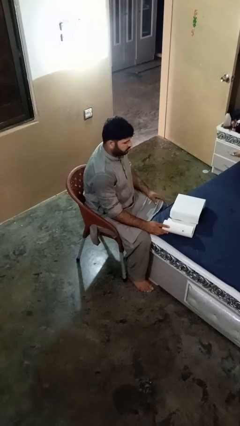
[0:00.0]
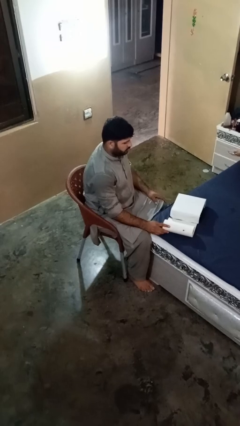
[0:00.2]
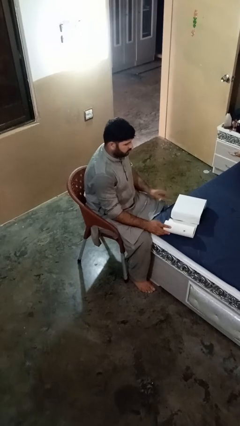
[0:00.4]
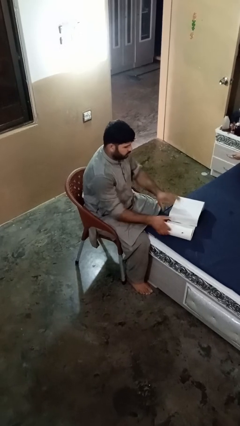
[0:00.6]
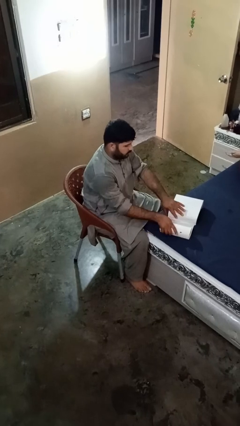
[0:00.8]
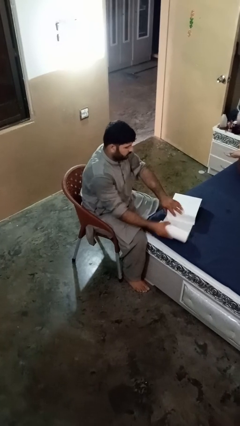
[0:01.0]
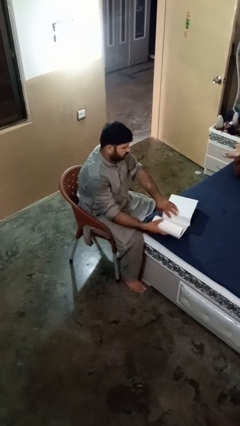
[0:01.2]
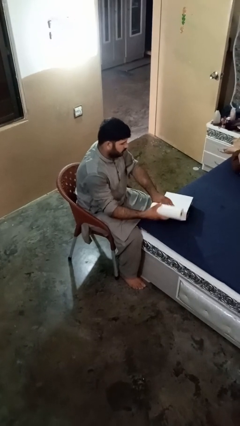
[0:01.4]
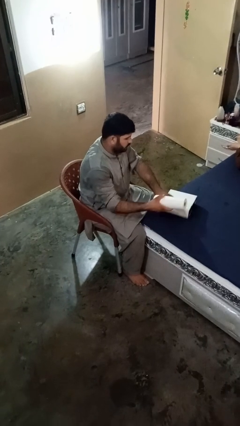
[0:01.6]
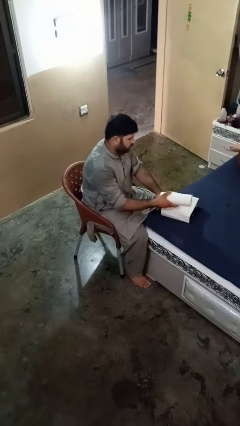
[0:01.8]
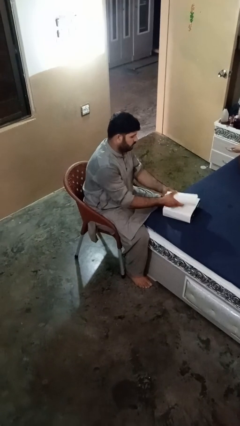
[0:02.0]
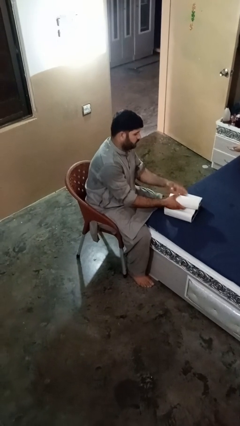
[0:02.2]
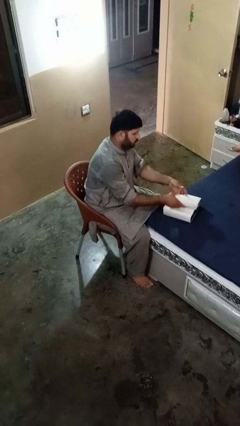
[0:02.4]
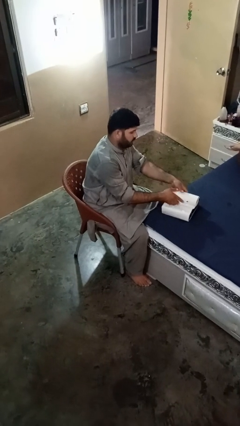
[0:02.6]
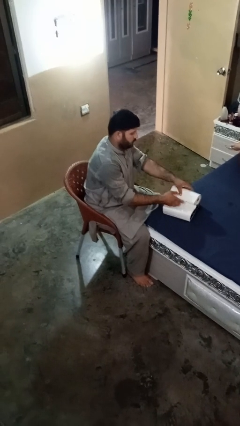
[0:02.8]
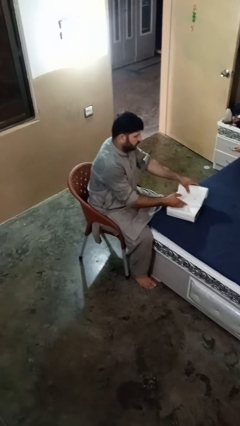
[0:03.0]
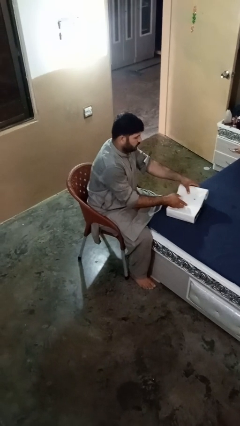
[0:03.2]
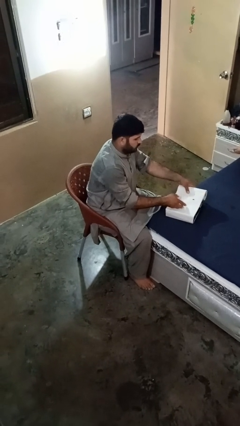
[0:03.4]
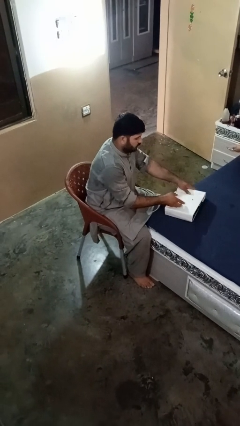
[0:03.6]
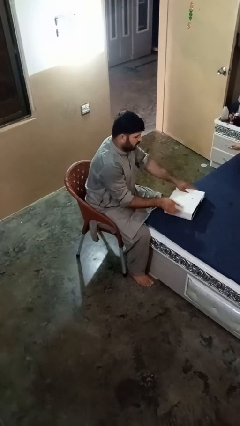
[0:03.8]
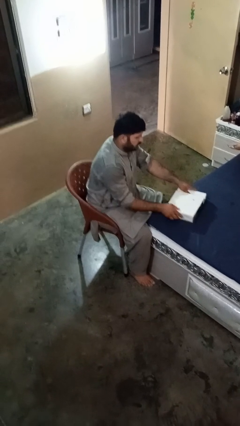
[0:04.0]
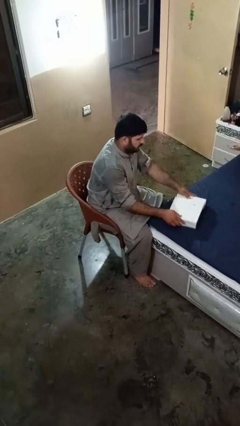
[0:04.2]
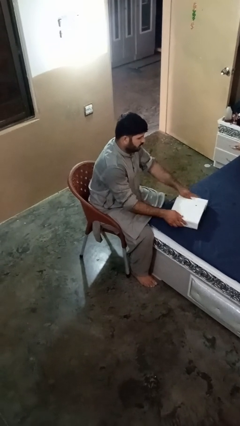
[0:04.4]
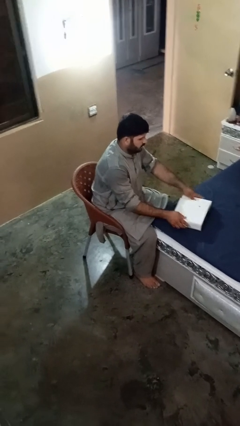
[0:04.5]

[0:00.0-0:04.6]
person wraps box

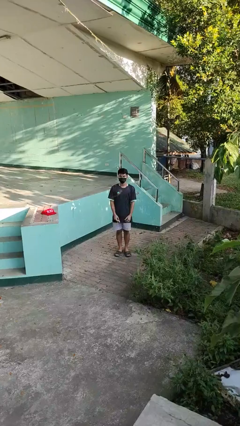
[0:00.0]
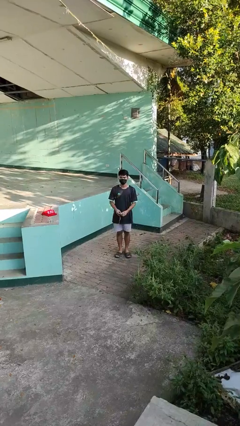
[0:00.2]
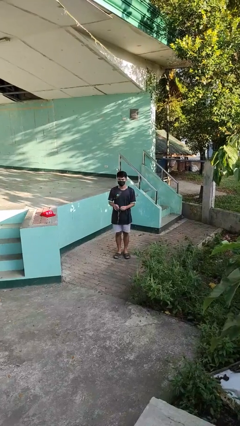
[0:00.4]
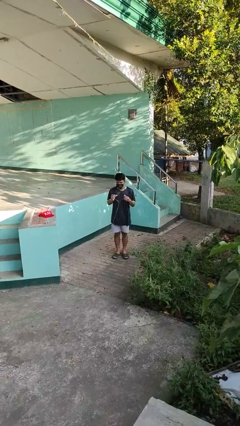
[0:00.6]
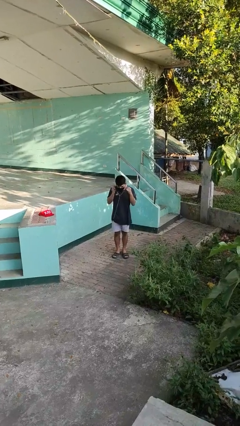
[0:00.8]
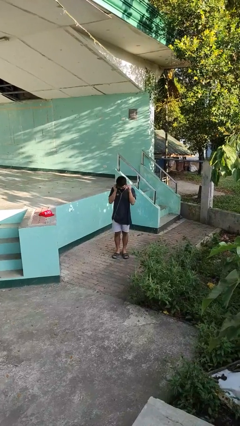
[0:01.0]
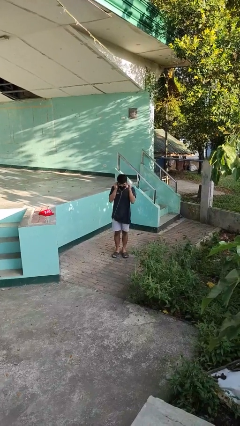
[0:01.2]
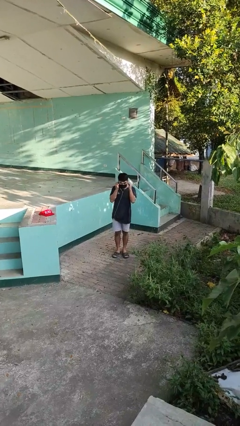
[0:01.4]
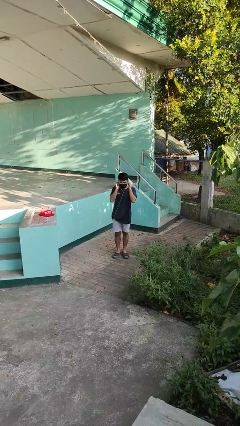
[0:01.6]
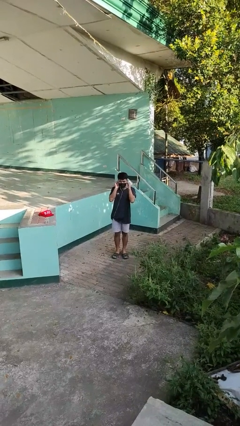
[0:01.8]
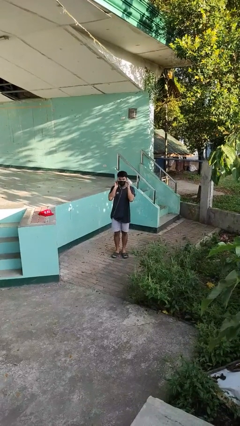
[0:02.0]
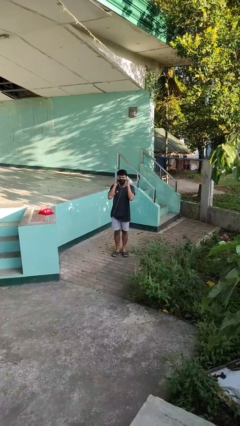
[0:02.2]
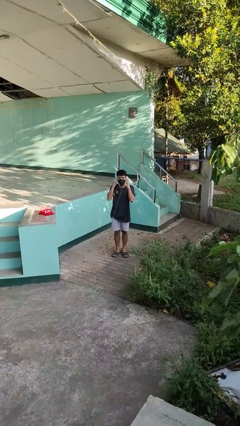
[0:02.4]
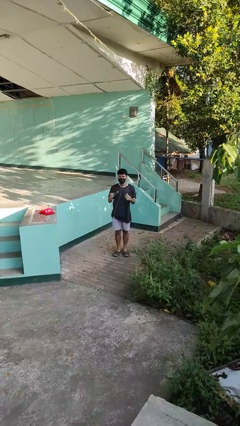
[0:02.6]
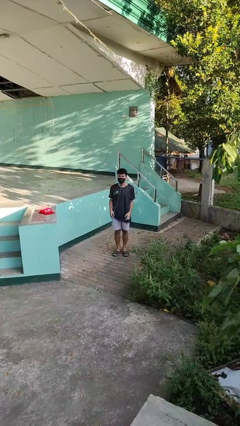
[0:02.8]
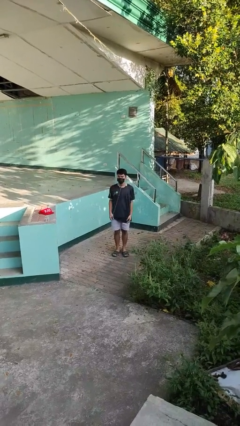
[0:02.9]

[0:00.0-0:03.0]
person puts on headphones

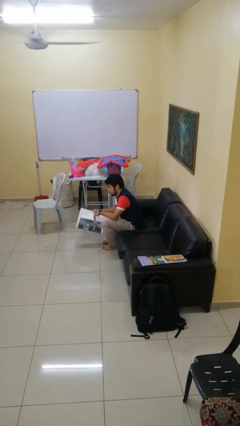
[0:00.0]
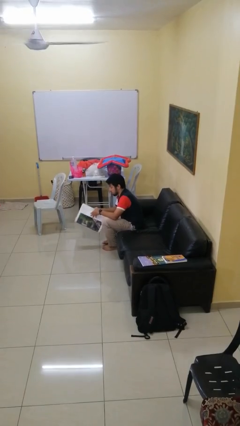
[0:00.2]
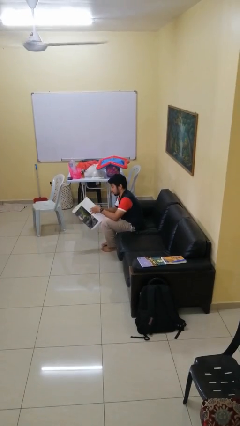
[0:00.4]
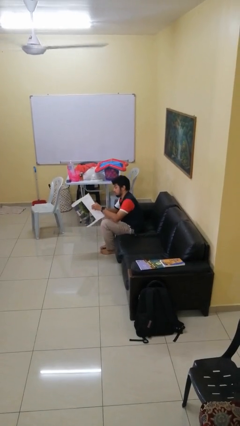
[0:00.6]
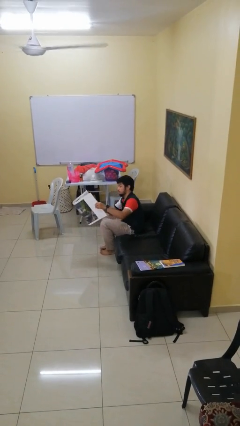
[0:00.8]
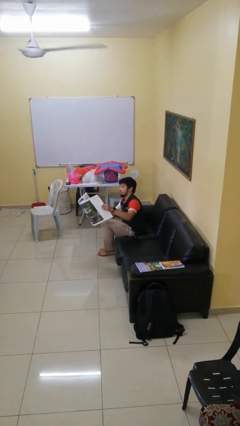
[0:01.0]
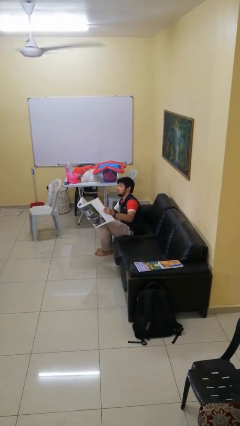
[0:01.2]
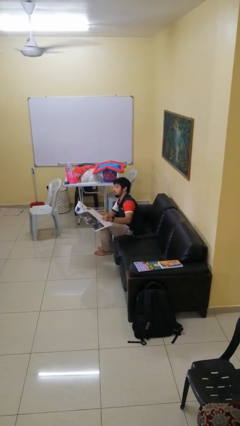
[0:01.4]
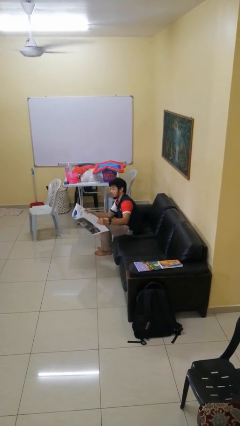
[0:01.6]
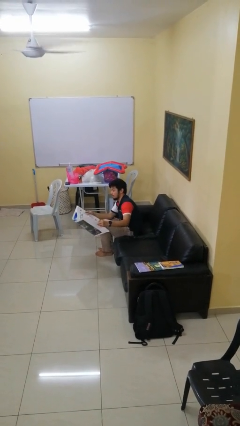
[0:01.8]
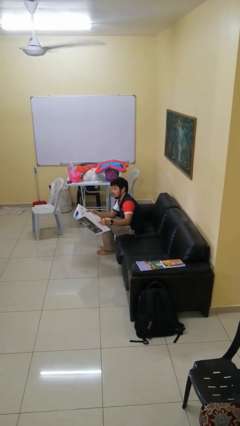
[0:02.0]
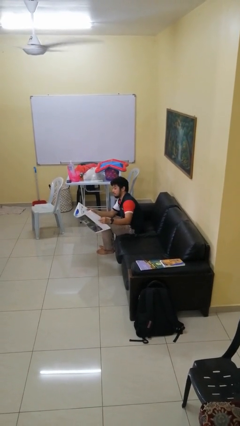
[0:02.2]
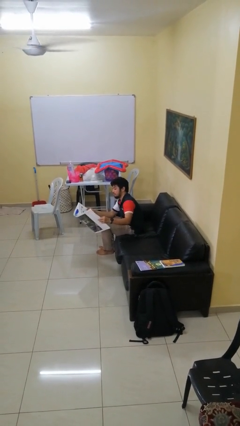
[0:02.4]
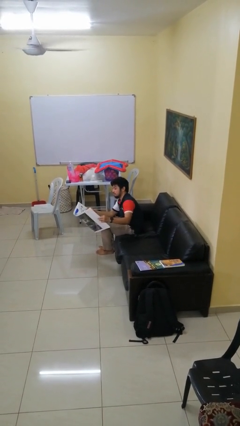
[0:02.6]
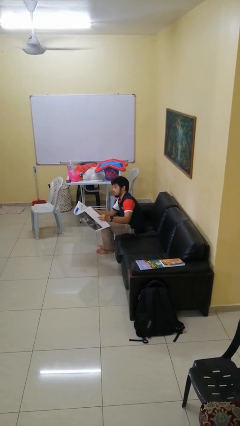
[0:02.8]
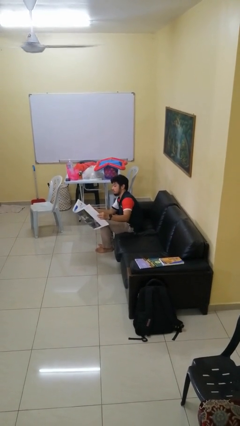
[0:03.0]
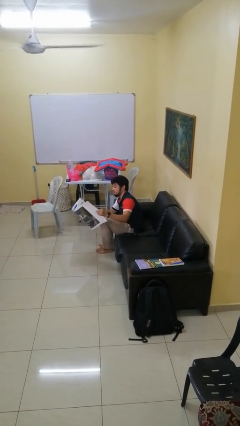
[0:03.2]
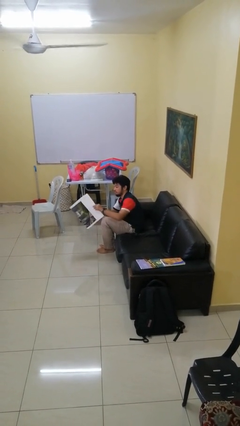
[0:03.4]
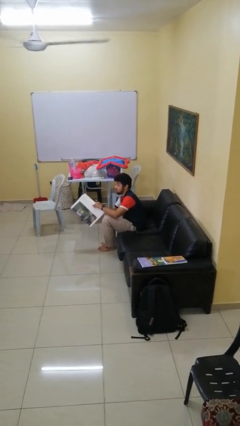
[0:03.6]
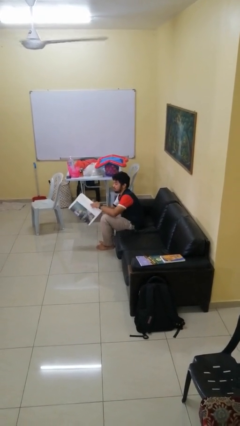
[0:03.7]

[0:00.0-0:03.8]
person reads newspaper

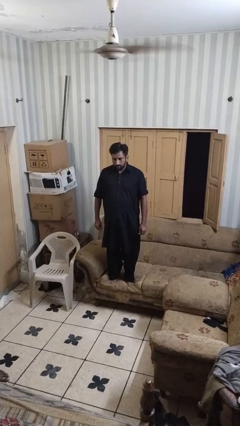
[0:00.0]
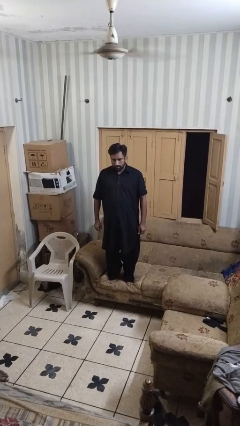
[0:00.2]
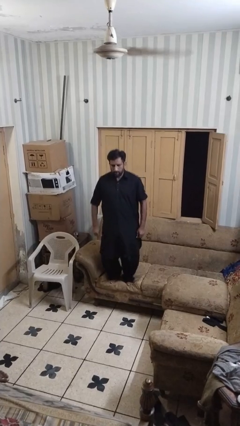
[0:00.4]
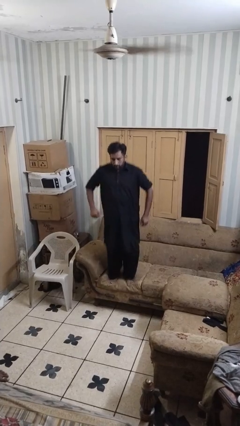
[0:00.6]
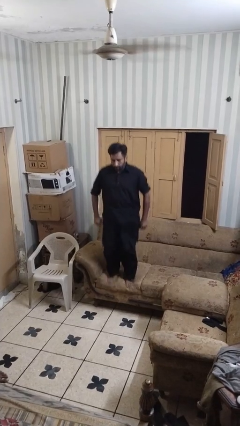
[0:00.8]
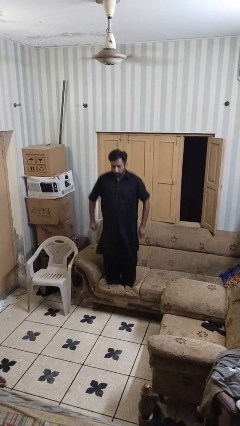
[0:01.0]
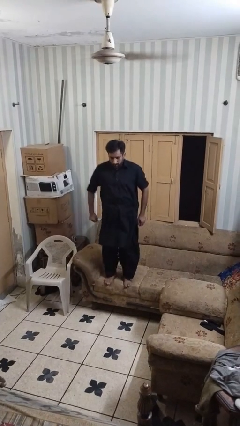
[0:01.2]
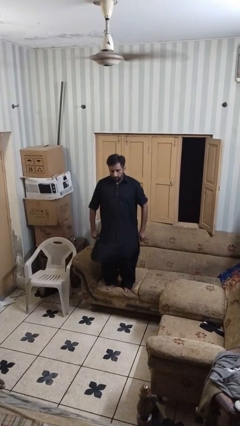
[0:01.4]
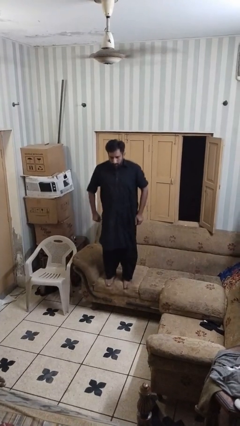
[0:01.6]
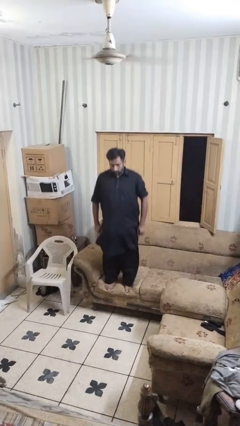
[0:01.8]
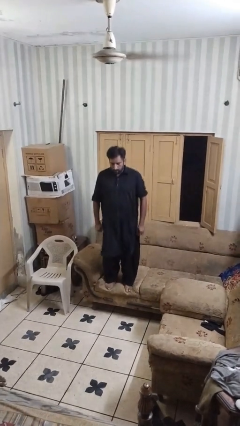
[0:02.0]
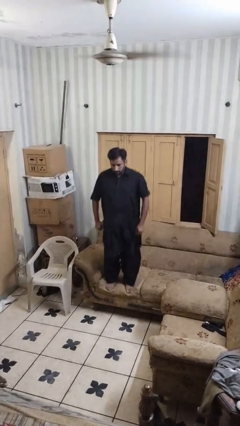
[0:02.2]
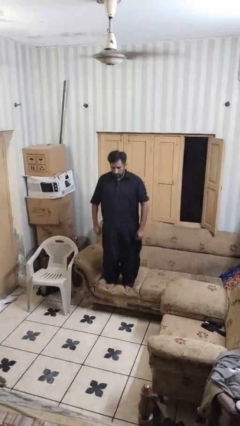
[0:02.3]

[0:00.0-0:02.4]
person jumps on couch

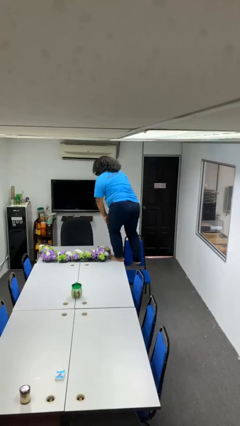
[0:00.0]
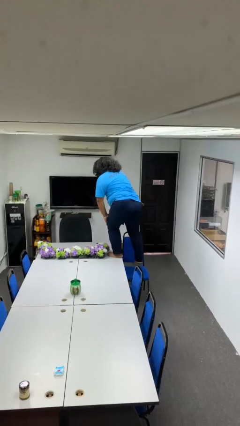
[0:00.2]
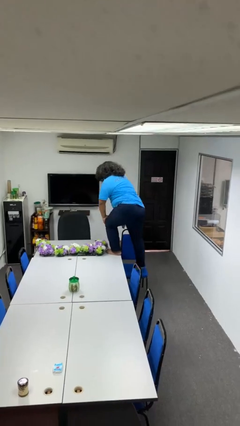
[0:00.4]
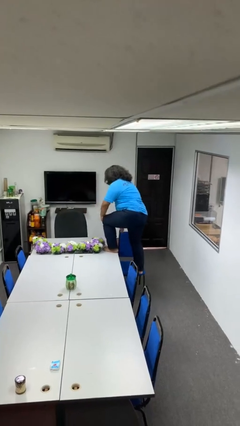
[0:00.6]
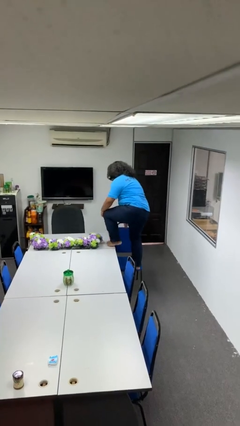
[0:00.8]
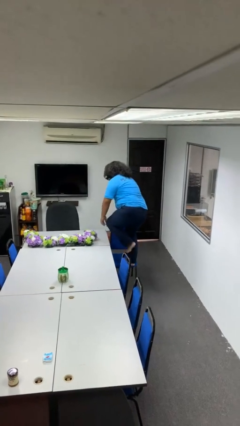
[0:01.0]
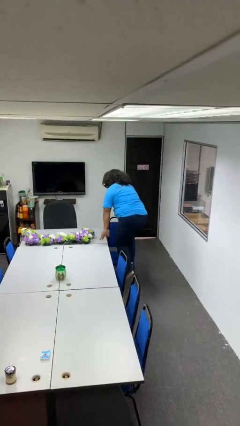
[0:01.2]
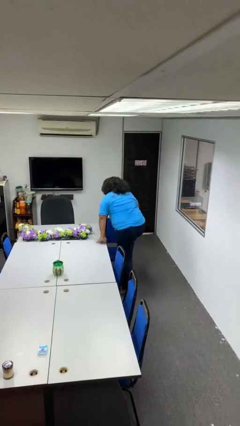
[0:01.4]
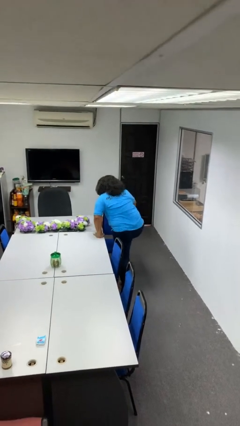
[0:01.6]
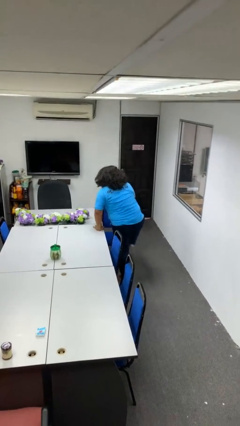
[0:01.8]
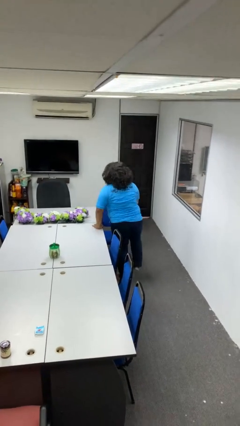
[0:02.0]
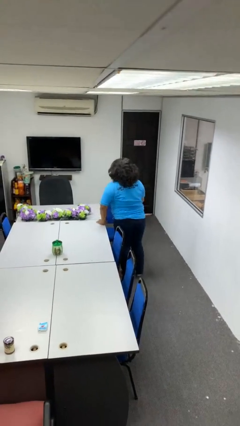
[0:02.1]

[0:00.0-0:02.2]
person climbs off table

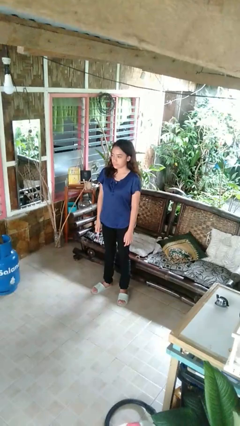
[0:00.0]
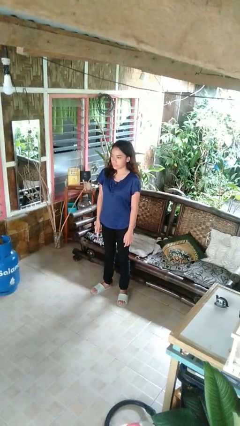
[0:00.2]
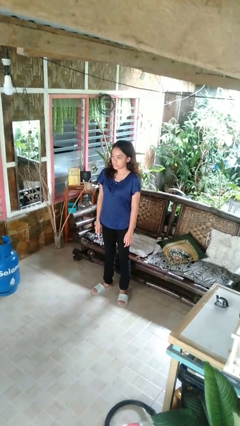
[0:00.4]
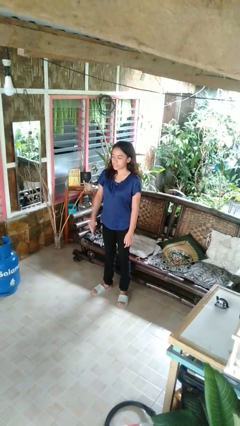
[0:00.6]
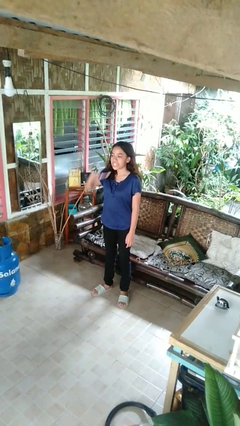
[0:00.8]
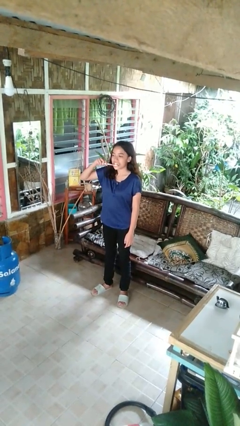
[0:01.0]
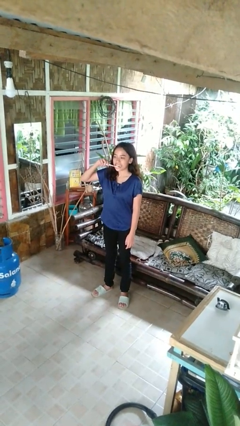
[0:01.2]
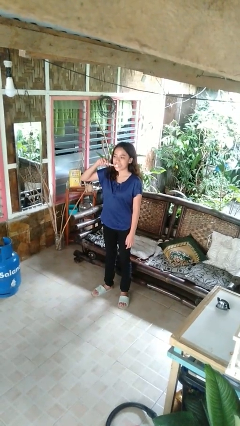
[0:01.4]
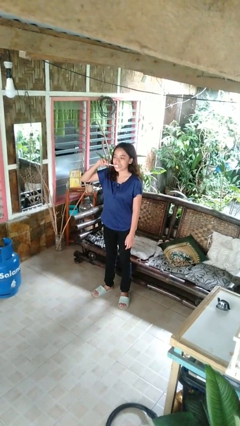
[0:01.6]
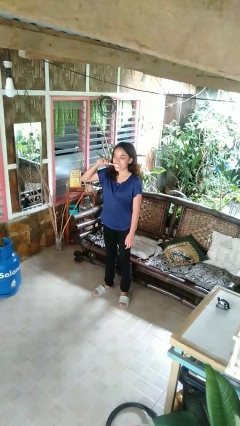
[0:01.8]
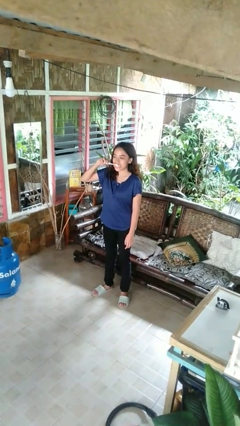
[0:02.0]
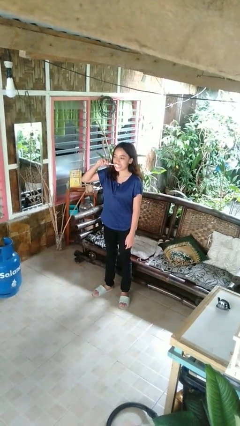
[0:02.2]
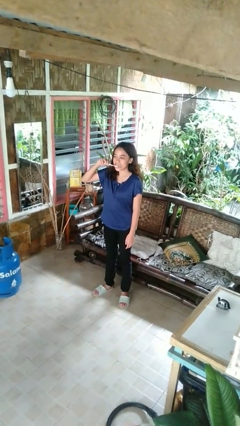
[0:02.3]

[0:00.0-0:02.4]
person brushes teeth
